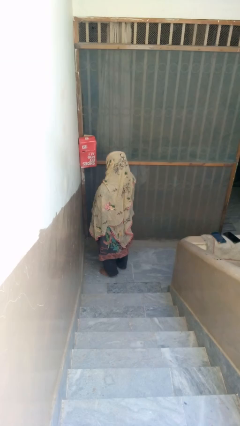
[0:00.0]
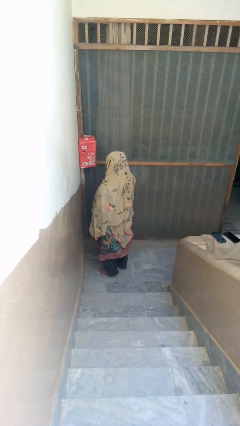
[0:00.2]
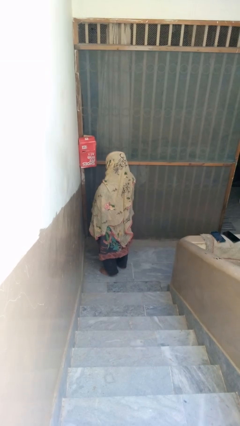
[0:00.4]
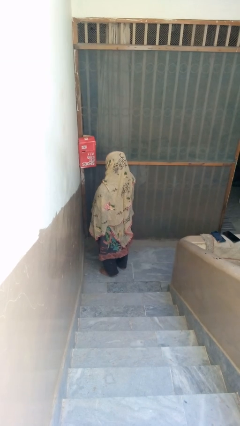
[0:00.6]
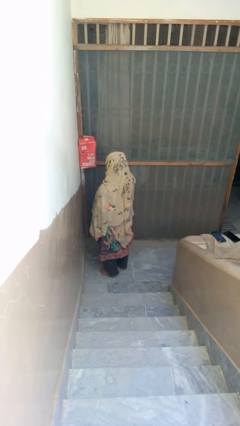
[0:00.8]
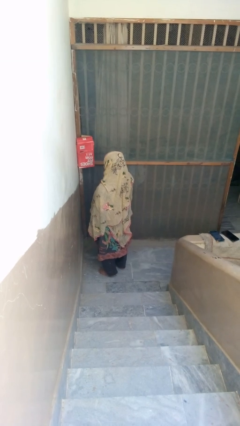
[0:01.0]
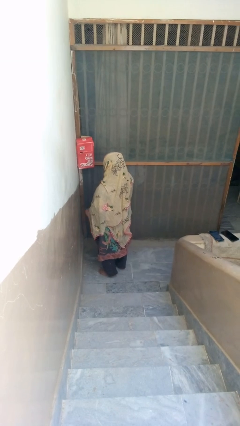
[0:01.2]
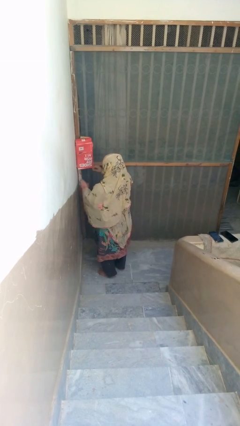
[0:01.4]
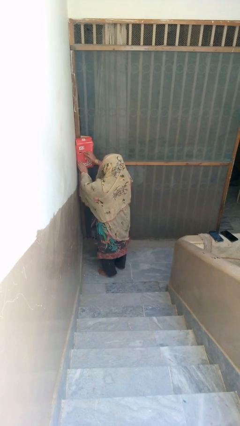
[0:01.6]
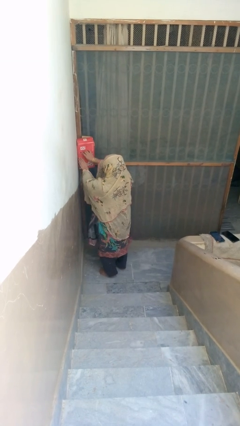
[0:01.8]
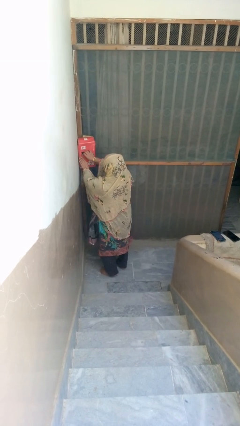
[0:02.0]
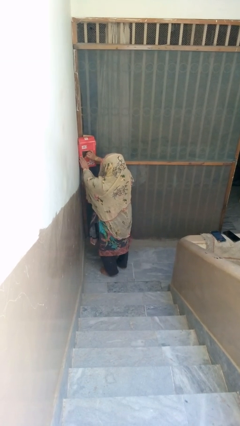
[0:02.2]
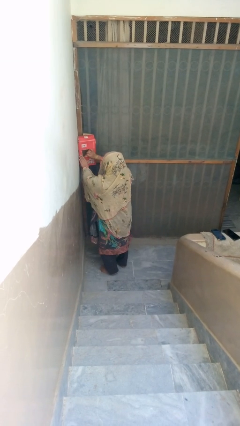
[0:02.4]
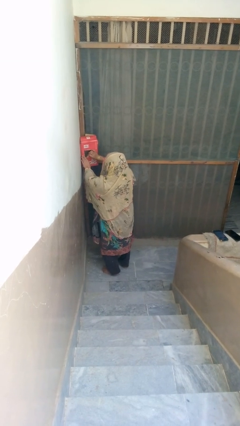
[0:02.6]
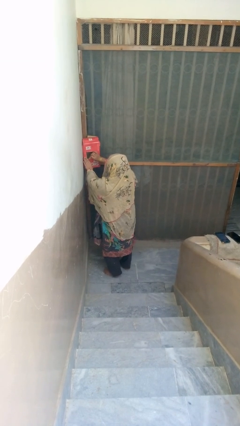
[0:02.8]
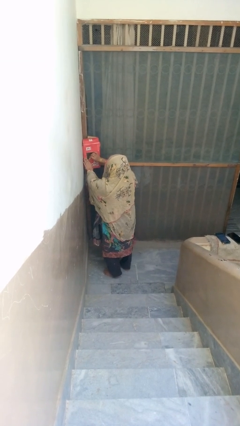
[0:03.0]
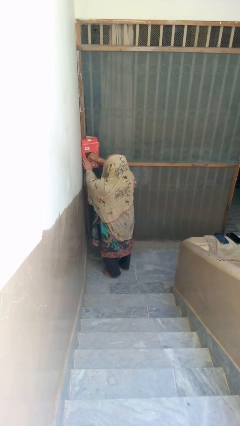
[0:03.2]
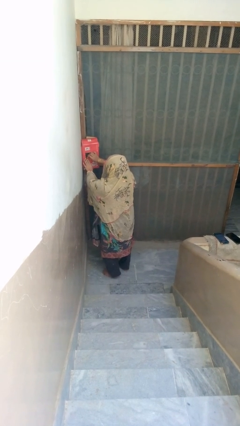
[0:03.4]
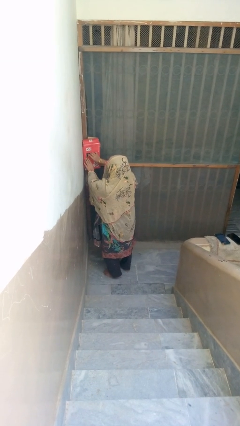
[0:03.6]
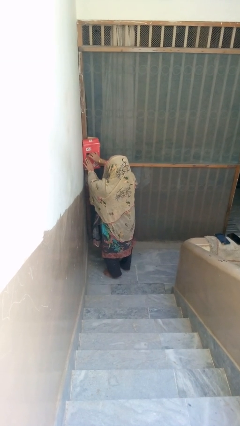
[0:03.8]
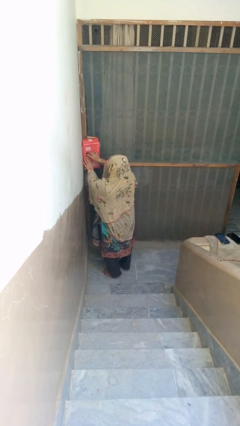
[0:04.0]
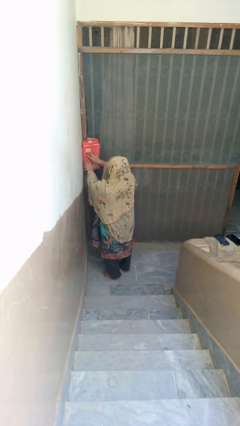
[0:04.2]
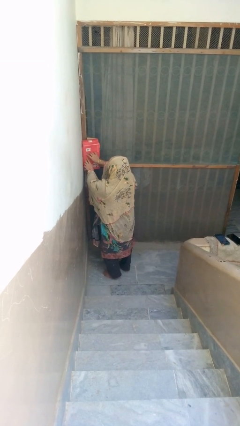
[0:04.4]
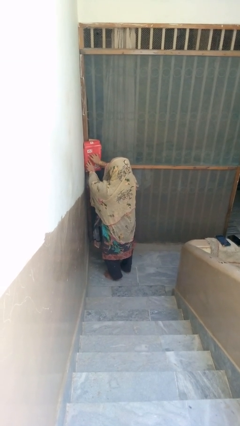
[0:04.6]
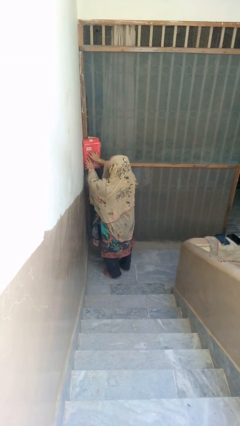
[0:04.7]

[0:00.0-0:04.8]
person opens mailbox

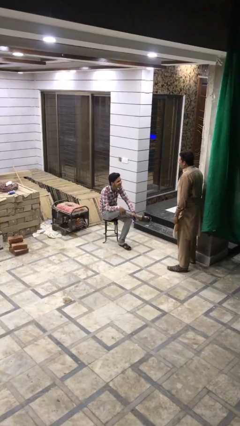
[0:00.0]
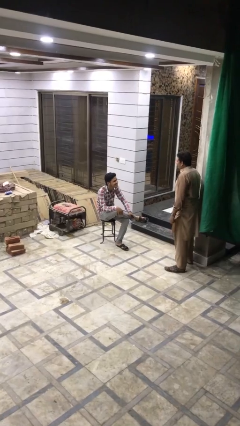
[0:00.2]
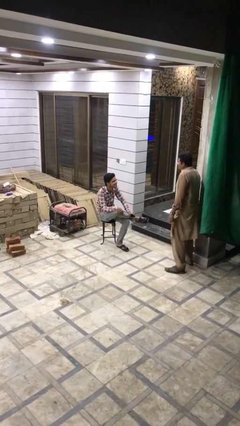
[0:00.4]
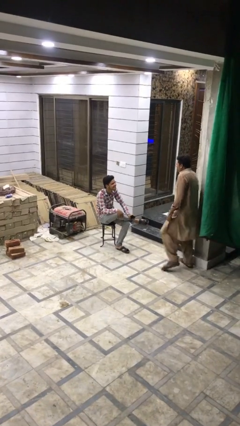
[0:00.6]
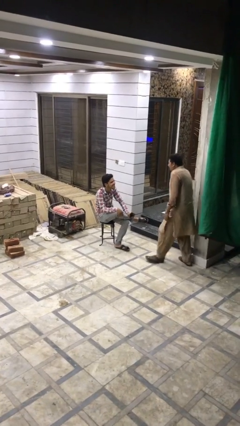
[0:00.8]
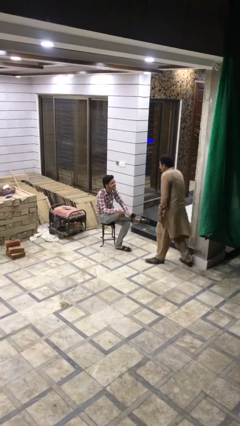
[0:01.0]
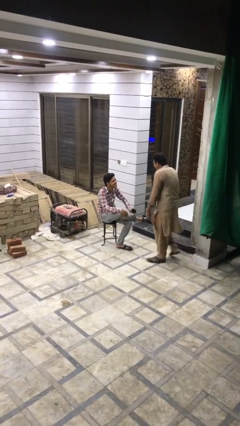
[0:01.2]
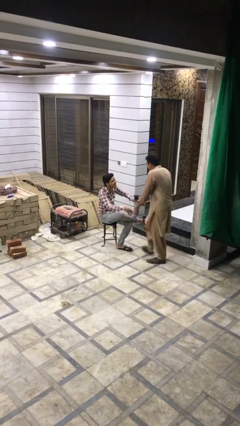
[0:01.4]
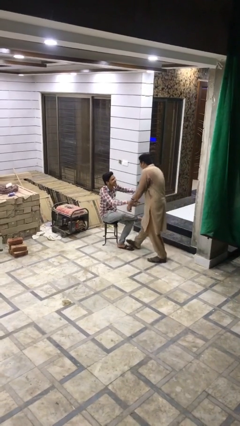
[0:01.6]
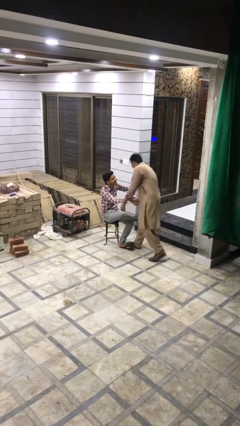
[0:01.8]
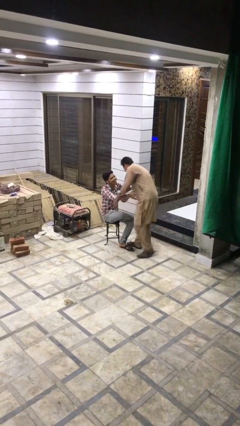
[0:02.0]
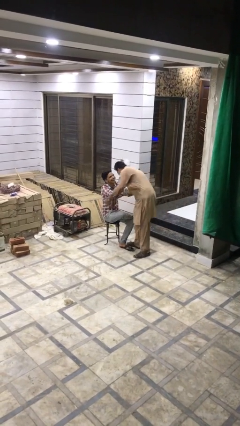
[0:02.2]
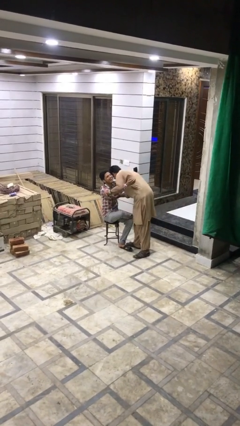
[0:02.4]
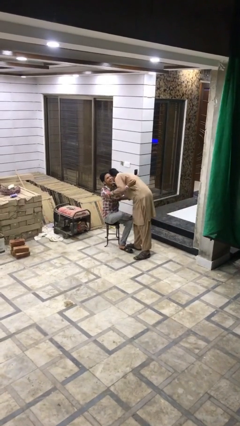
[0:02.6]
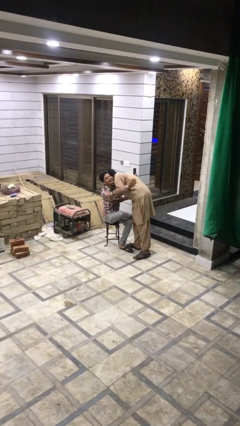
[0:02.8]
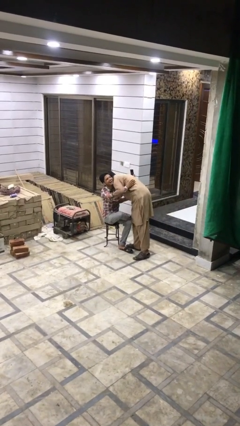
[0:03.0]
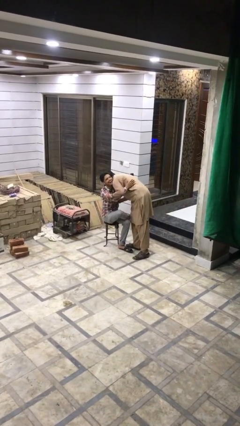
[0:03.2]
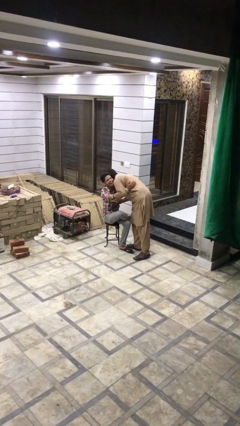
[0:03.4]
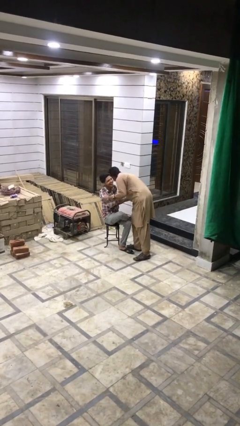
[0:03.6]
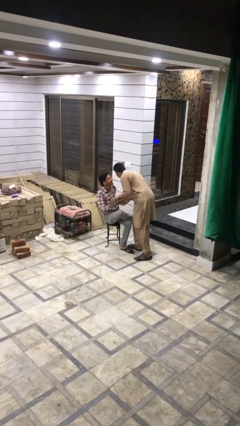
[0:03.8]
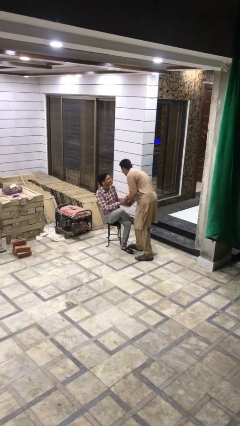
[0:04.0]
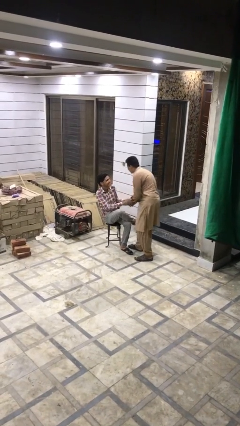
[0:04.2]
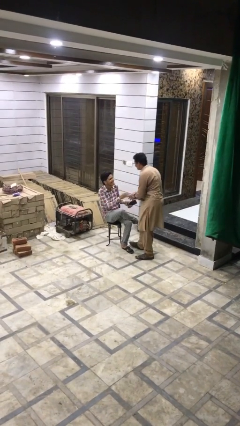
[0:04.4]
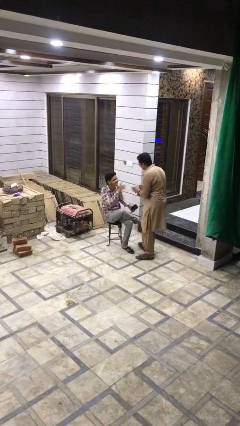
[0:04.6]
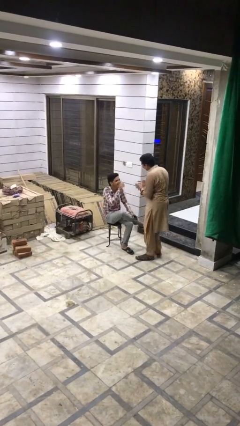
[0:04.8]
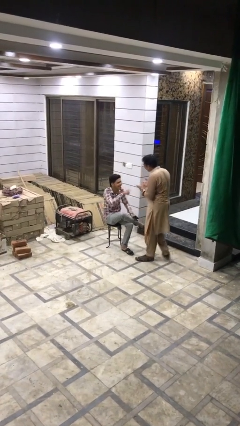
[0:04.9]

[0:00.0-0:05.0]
person embraces person

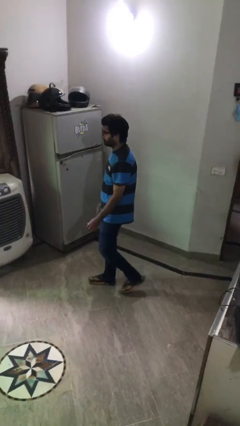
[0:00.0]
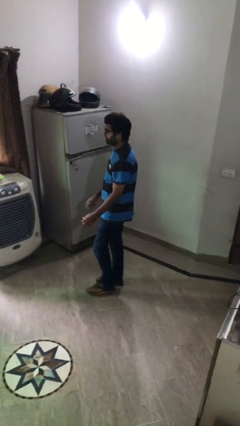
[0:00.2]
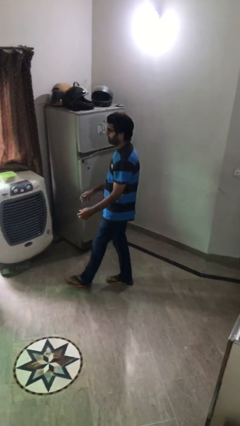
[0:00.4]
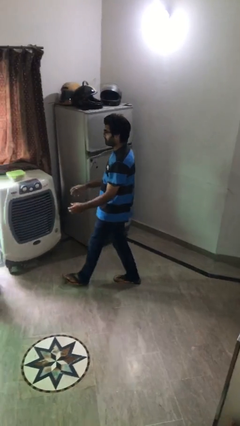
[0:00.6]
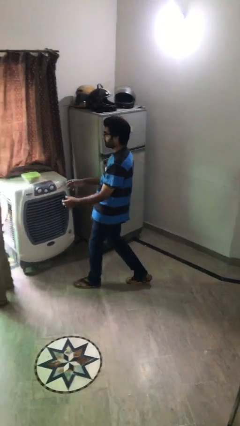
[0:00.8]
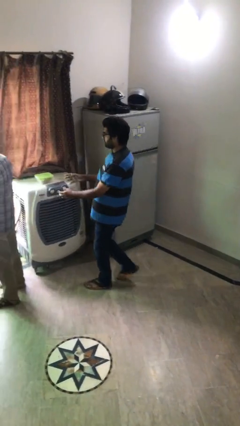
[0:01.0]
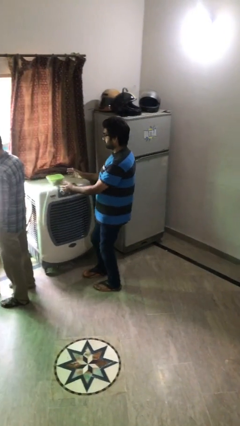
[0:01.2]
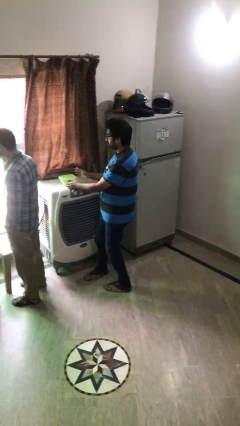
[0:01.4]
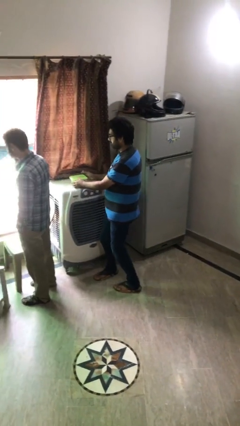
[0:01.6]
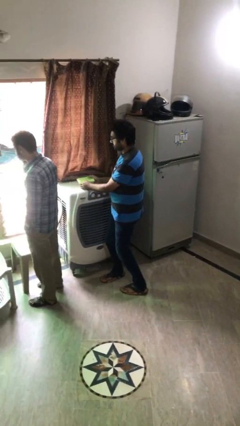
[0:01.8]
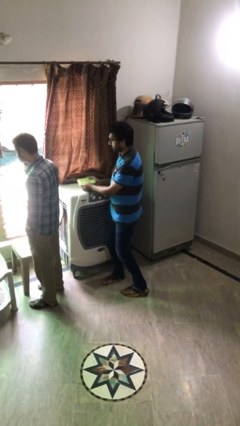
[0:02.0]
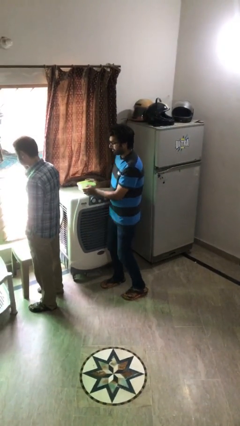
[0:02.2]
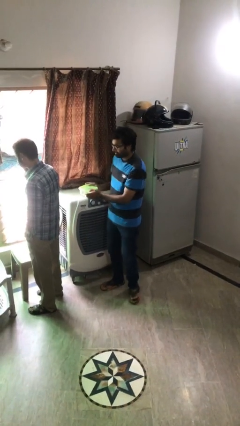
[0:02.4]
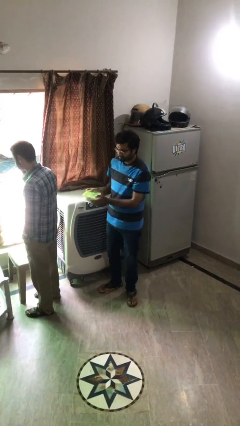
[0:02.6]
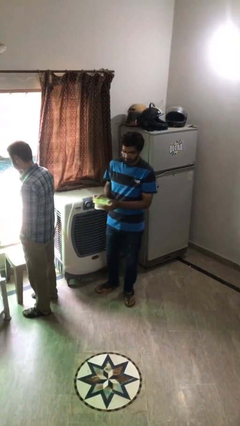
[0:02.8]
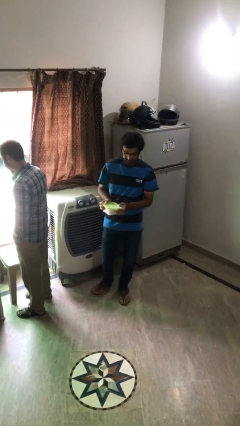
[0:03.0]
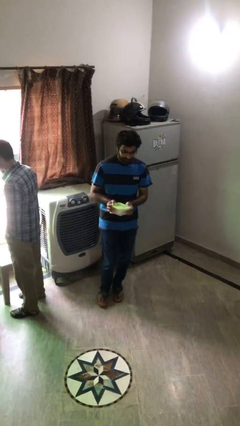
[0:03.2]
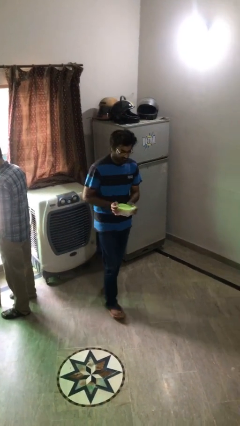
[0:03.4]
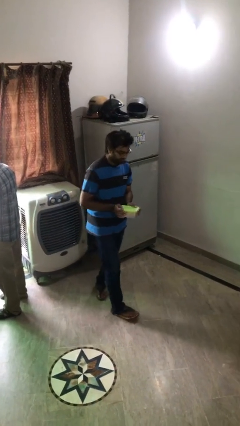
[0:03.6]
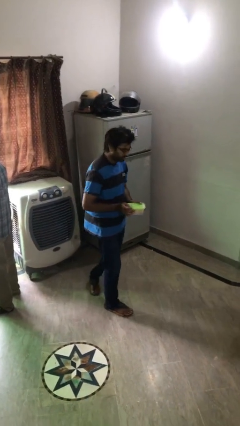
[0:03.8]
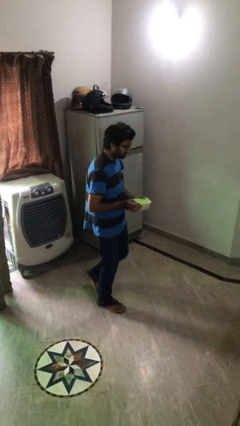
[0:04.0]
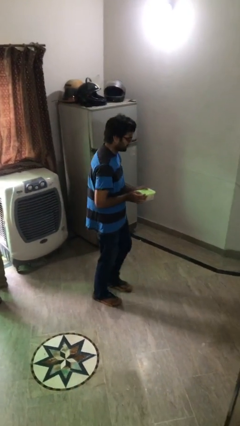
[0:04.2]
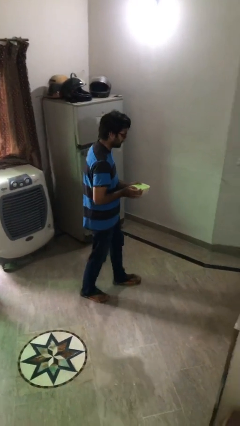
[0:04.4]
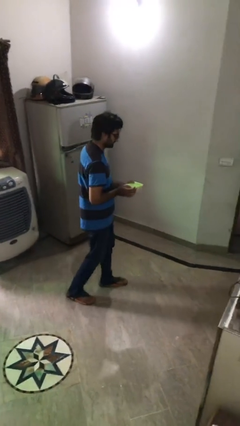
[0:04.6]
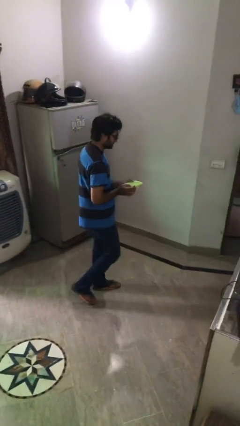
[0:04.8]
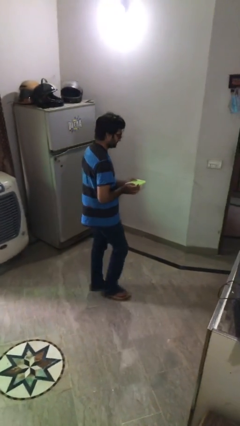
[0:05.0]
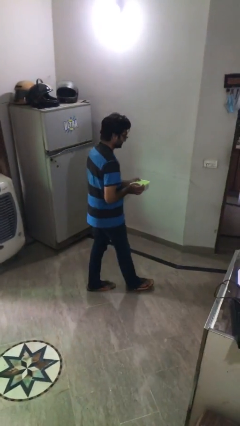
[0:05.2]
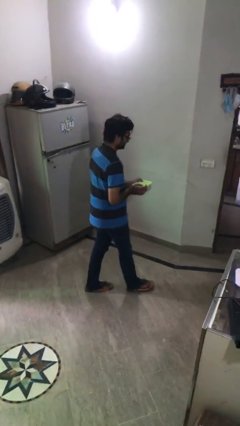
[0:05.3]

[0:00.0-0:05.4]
person steals object from person

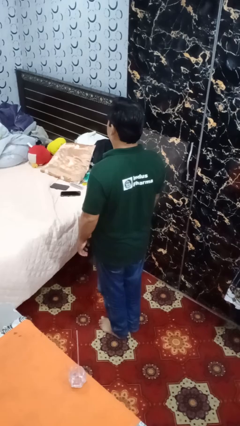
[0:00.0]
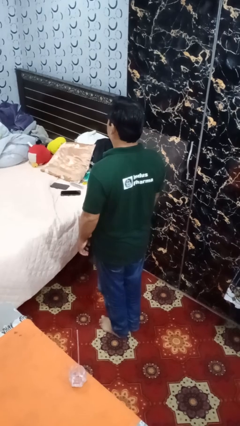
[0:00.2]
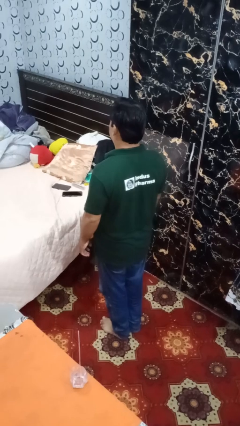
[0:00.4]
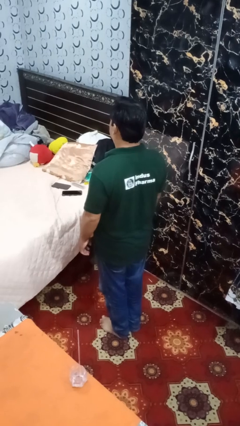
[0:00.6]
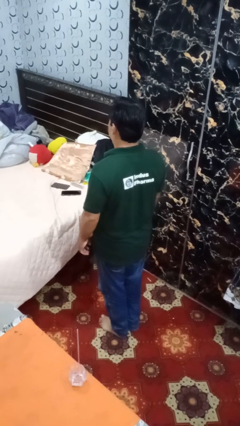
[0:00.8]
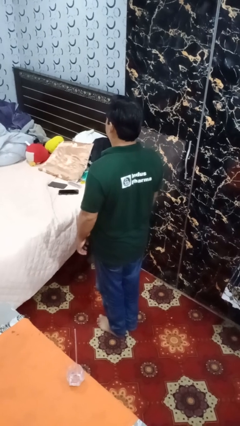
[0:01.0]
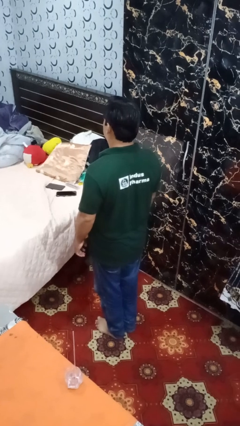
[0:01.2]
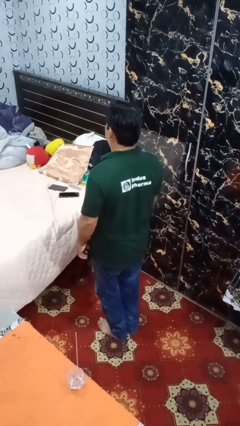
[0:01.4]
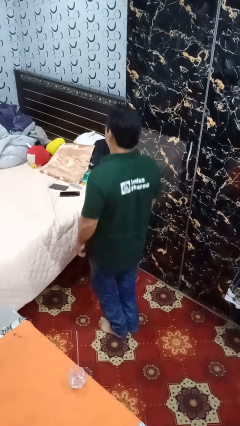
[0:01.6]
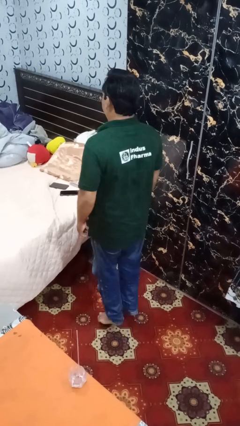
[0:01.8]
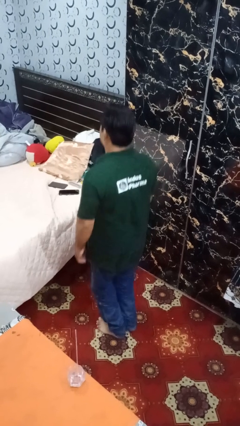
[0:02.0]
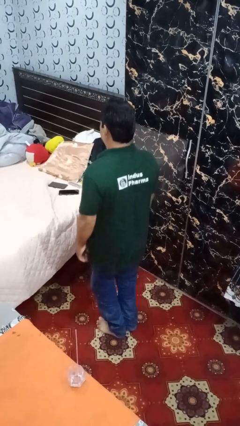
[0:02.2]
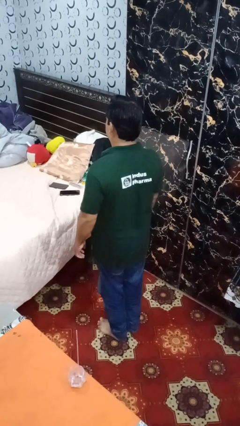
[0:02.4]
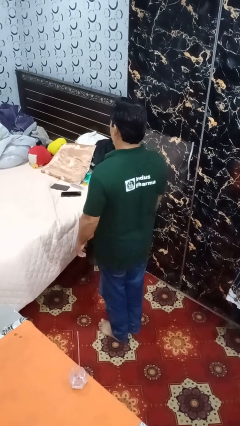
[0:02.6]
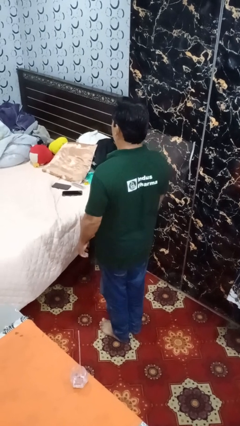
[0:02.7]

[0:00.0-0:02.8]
person jumps
